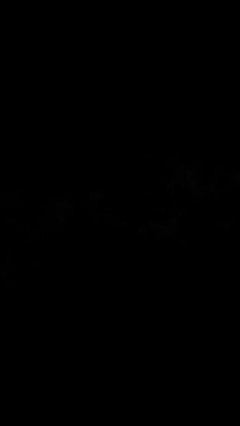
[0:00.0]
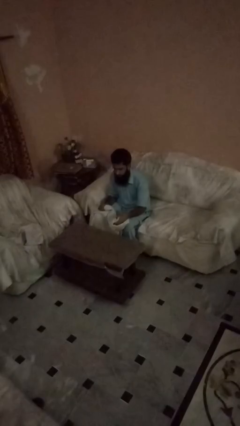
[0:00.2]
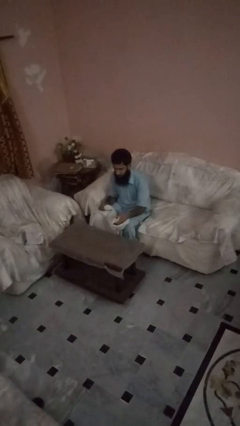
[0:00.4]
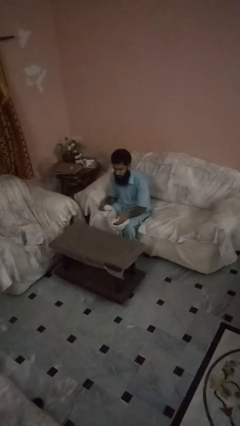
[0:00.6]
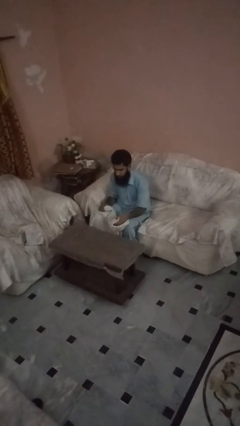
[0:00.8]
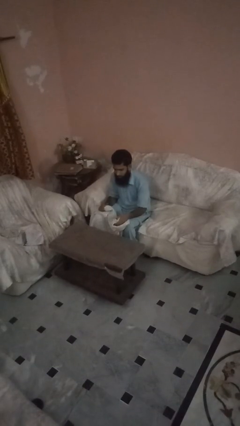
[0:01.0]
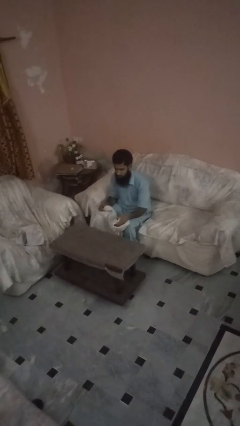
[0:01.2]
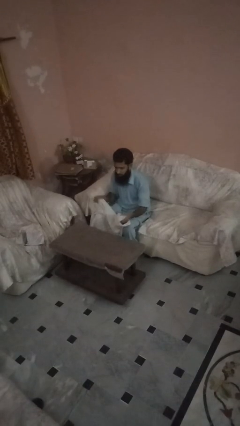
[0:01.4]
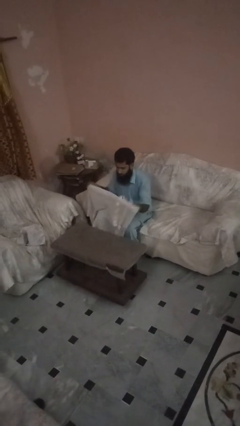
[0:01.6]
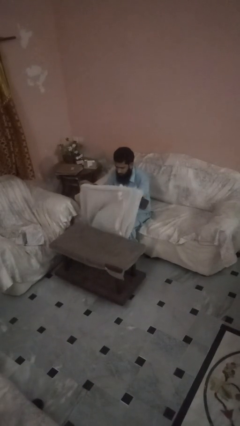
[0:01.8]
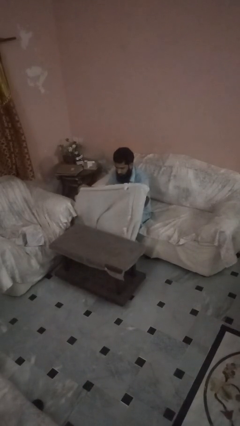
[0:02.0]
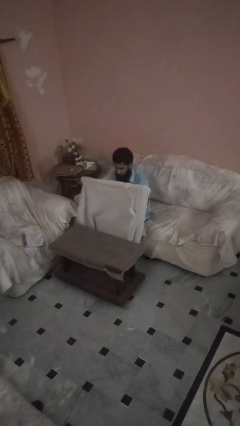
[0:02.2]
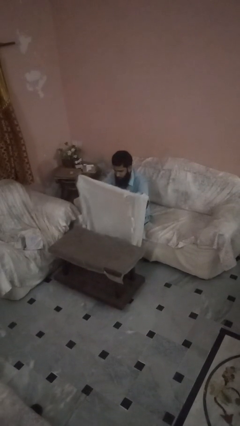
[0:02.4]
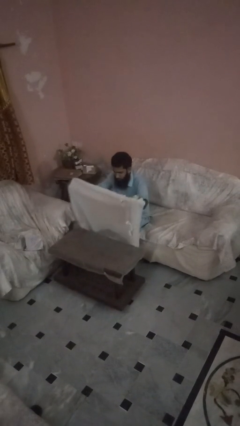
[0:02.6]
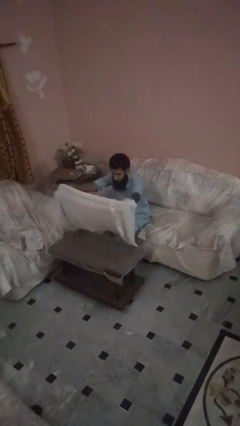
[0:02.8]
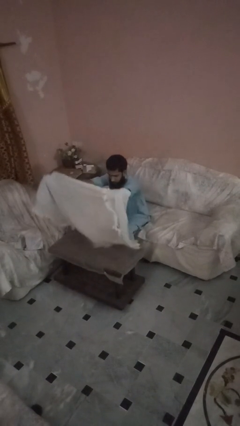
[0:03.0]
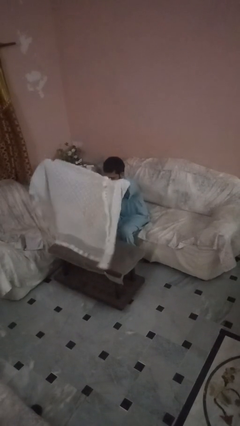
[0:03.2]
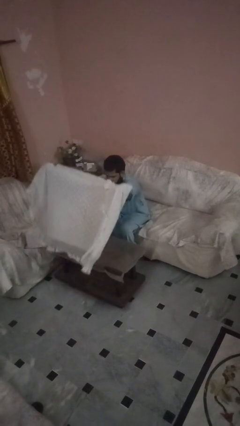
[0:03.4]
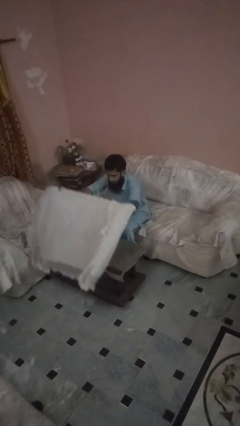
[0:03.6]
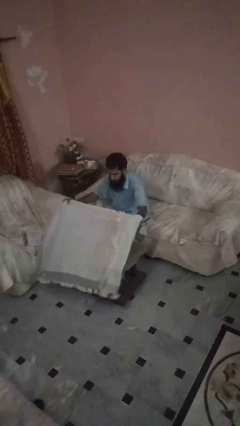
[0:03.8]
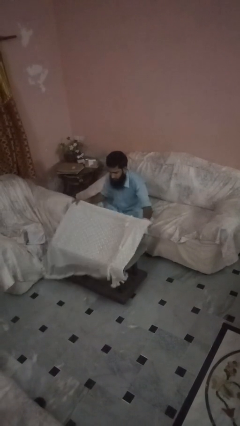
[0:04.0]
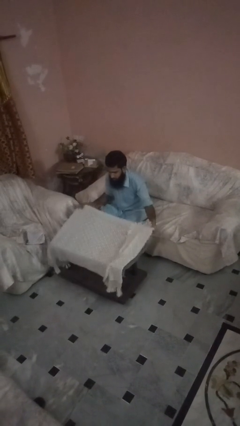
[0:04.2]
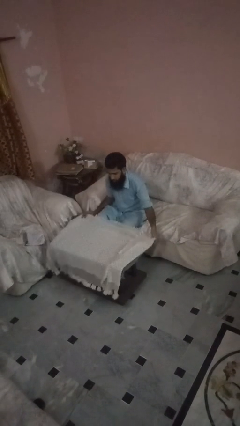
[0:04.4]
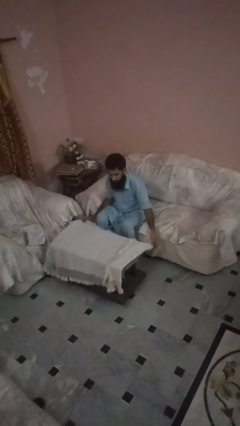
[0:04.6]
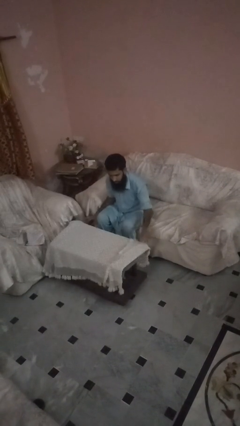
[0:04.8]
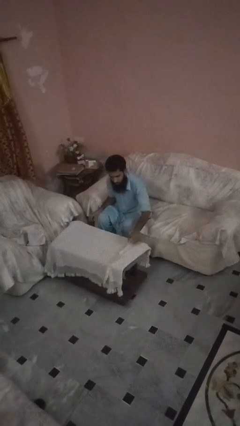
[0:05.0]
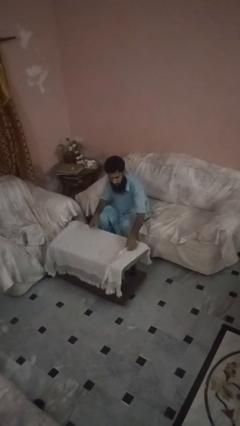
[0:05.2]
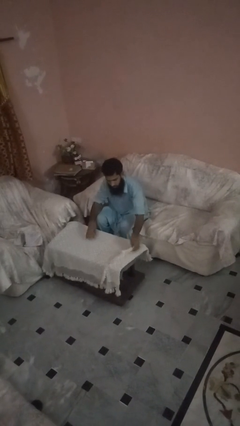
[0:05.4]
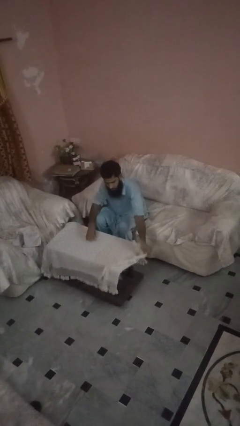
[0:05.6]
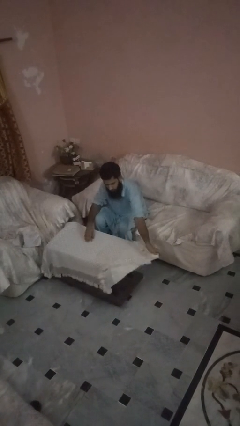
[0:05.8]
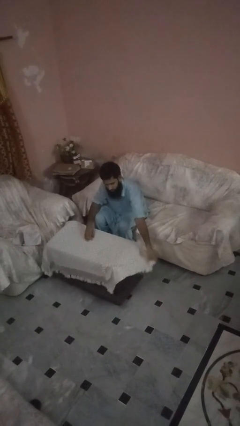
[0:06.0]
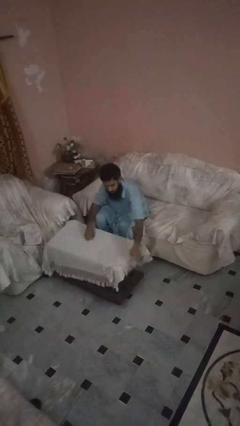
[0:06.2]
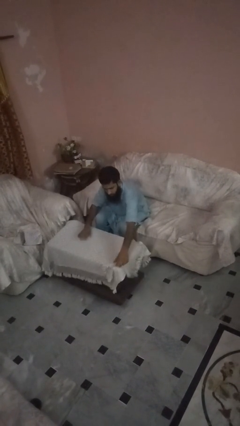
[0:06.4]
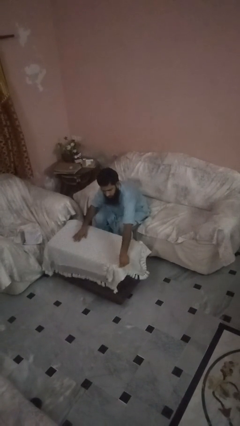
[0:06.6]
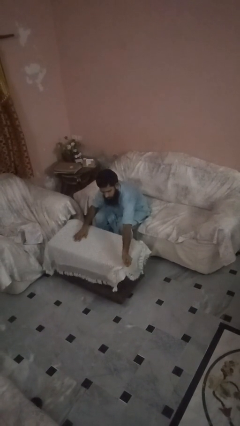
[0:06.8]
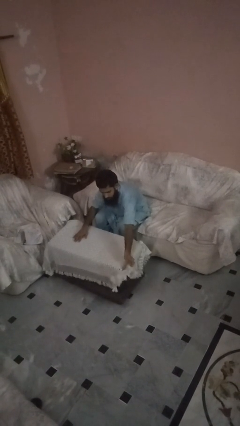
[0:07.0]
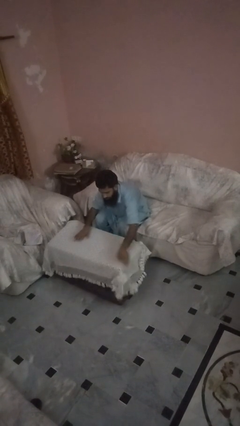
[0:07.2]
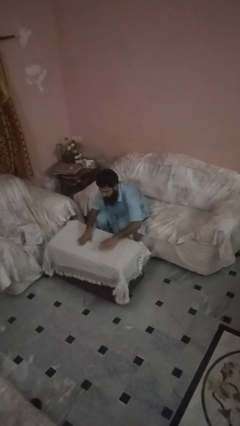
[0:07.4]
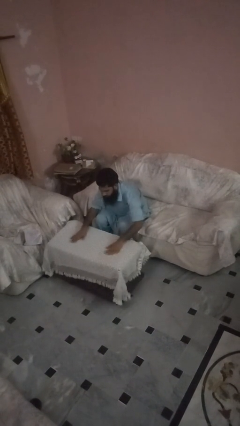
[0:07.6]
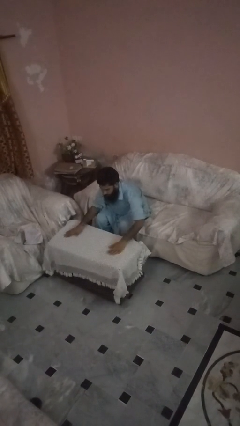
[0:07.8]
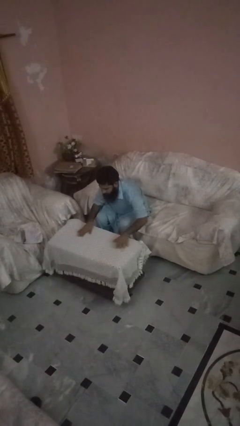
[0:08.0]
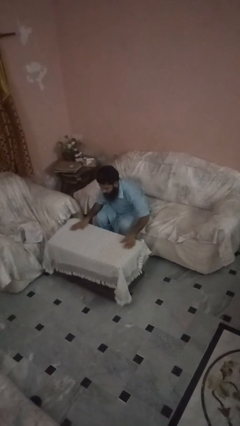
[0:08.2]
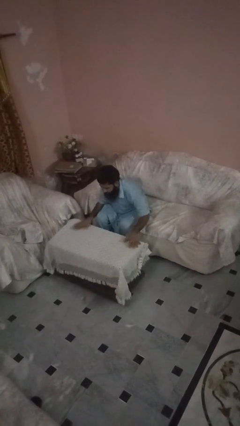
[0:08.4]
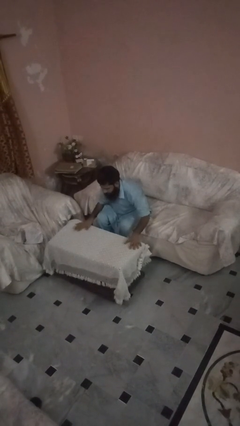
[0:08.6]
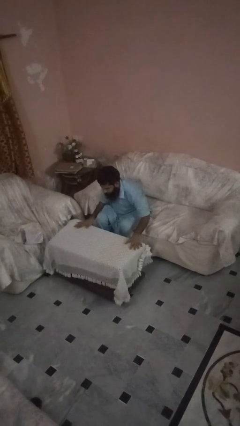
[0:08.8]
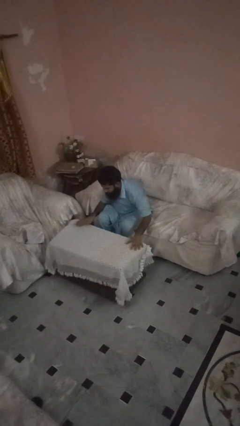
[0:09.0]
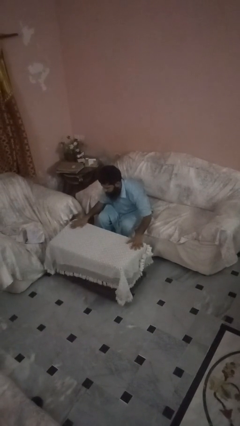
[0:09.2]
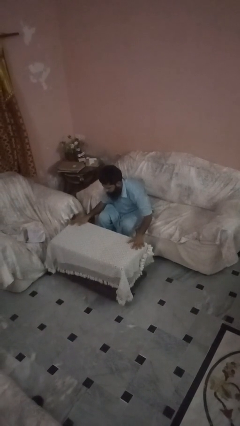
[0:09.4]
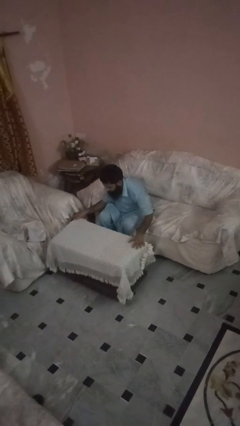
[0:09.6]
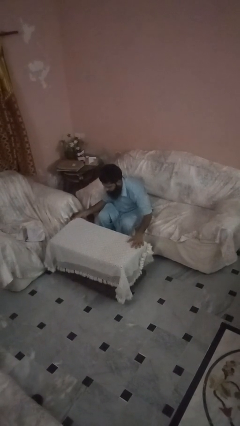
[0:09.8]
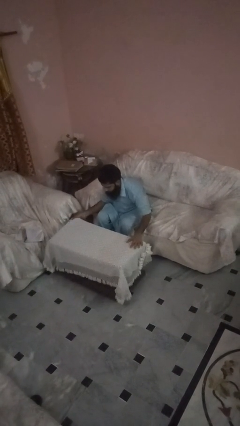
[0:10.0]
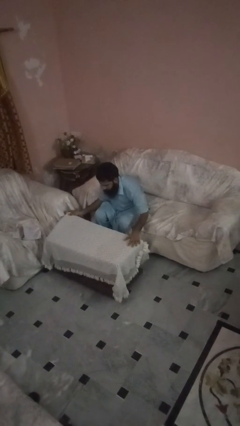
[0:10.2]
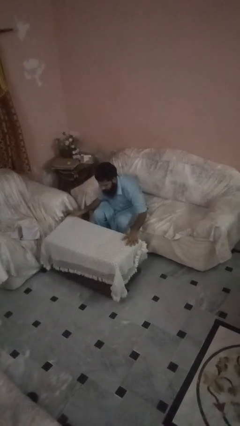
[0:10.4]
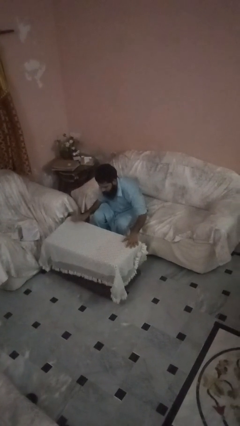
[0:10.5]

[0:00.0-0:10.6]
person spreads tablecloth

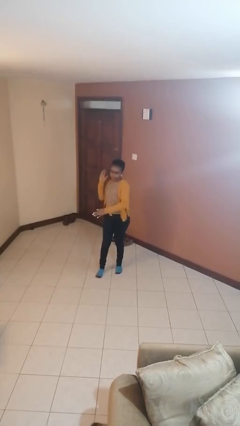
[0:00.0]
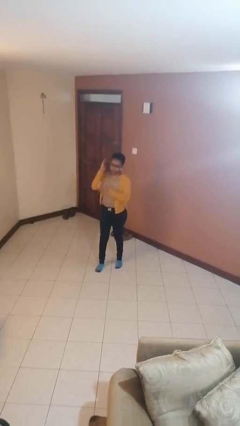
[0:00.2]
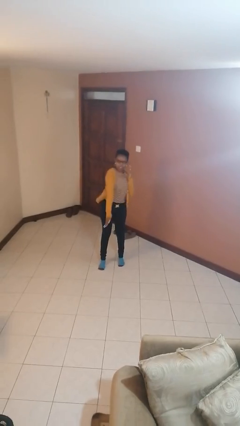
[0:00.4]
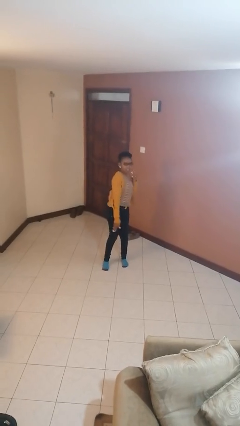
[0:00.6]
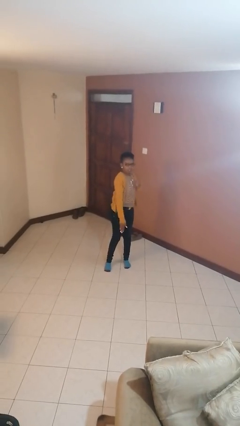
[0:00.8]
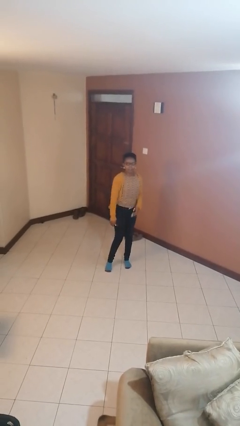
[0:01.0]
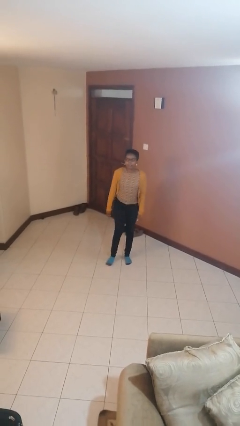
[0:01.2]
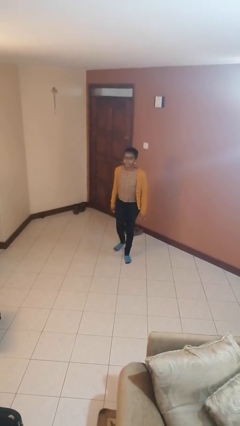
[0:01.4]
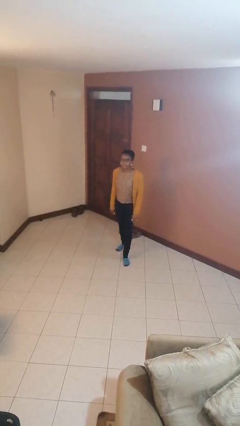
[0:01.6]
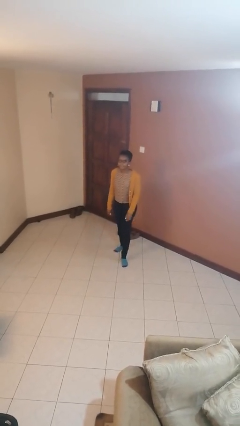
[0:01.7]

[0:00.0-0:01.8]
person karate chop

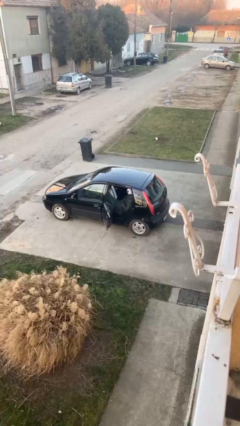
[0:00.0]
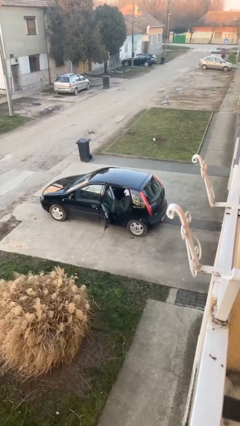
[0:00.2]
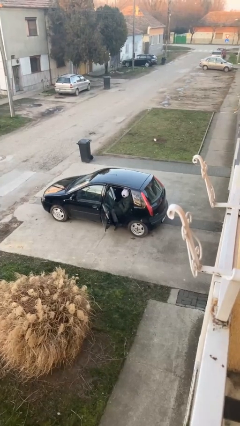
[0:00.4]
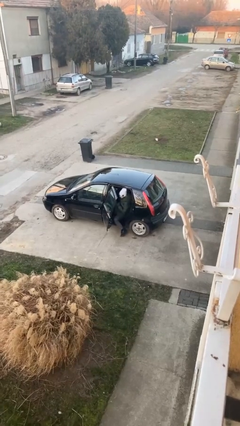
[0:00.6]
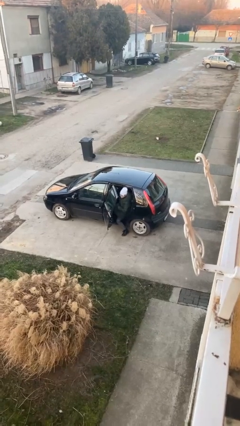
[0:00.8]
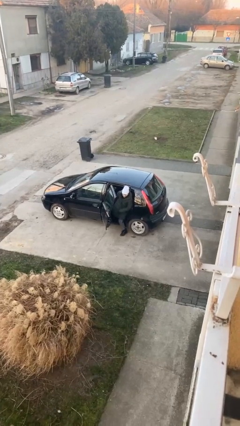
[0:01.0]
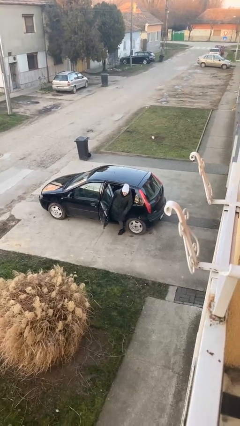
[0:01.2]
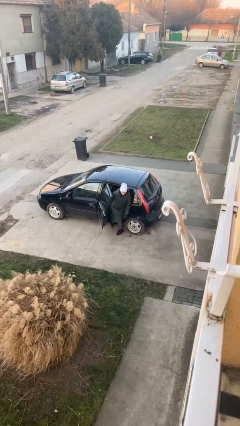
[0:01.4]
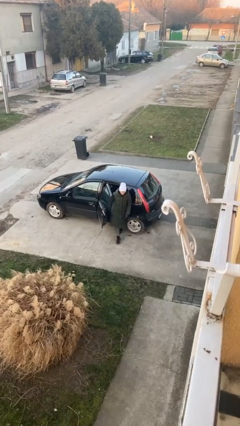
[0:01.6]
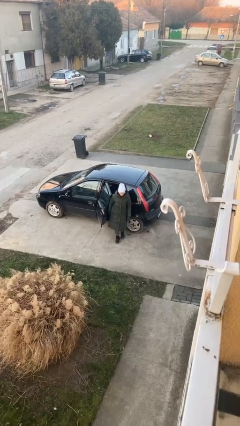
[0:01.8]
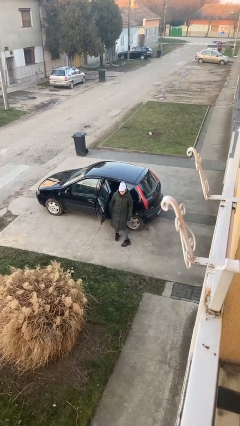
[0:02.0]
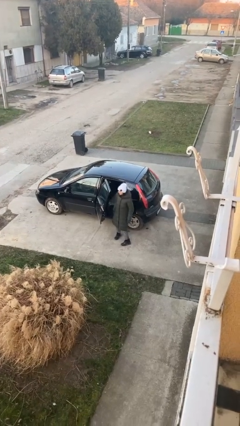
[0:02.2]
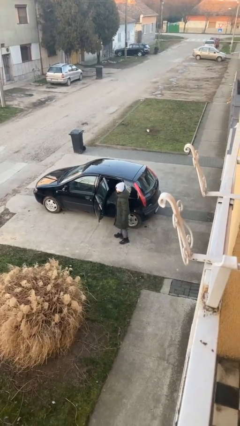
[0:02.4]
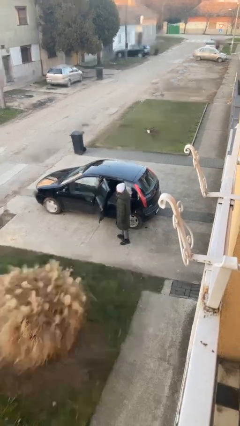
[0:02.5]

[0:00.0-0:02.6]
person exits car

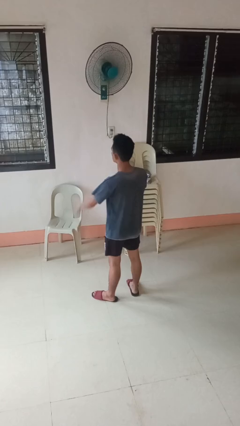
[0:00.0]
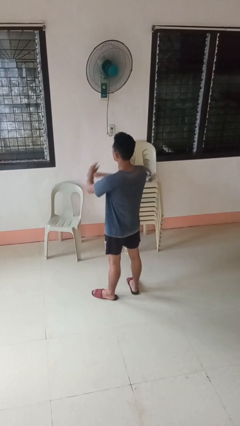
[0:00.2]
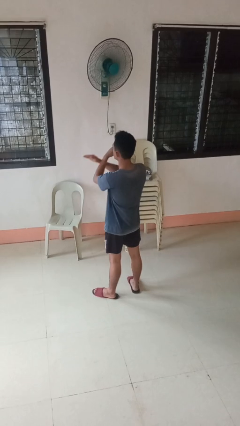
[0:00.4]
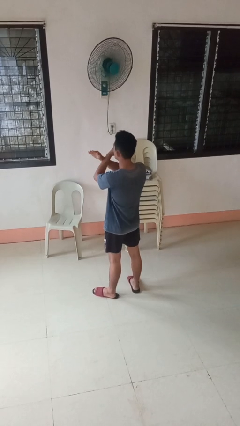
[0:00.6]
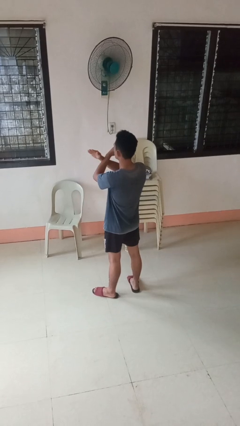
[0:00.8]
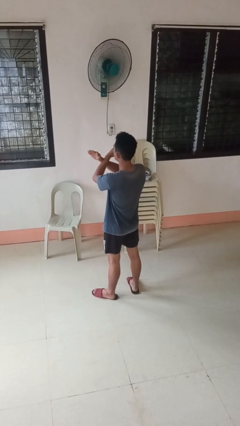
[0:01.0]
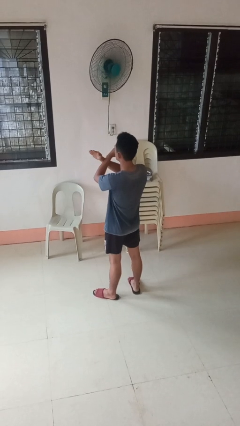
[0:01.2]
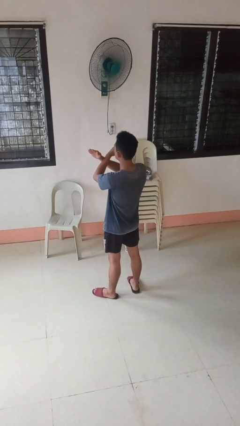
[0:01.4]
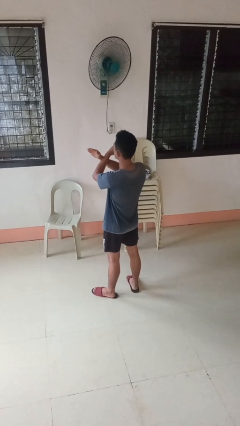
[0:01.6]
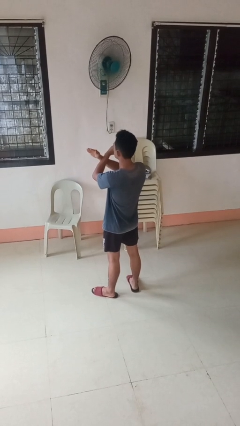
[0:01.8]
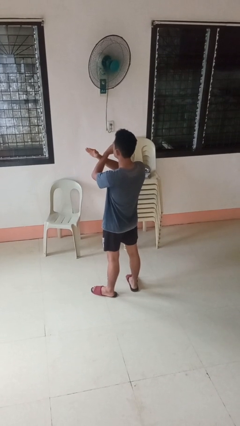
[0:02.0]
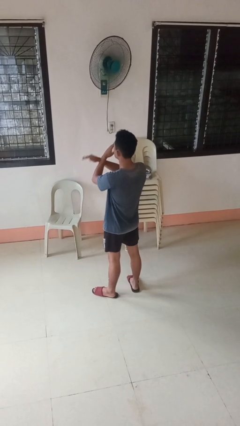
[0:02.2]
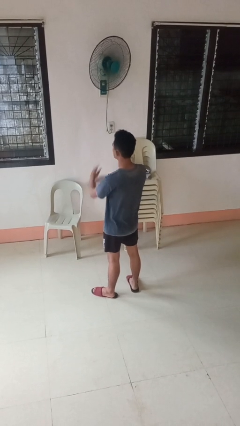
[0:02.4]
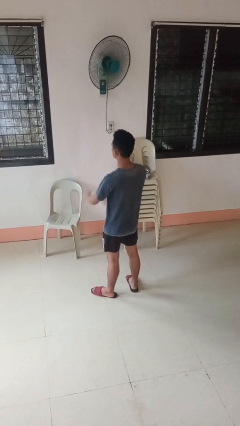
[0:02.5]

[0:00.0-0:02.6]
person gestures arms x
